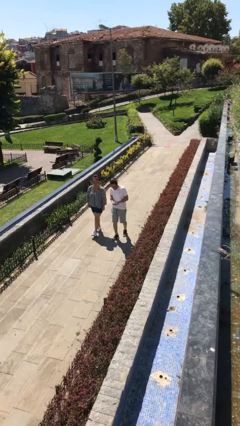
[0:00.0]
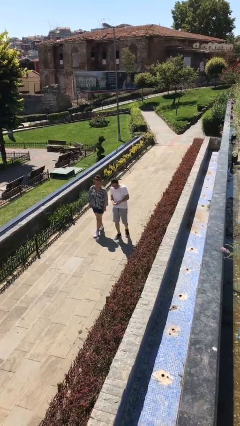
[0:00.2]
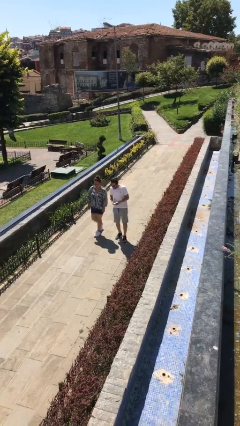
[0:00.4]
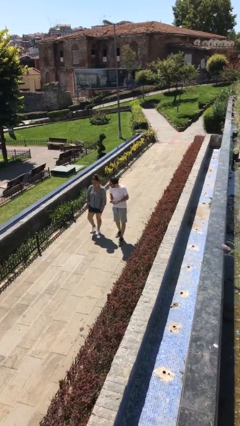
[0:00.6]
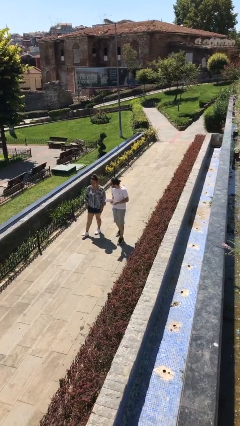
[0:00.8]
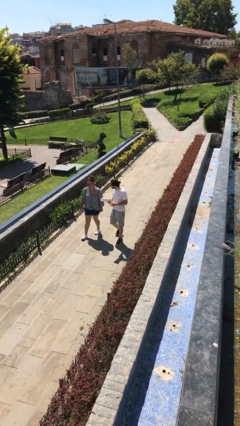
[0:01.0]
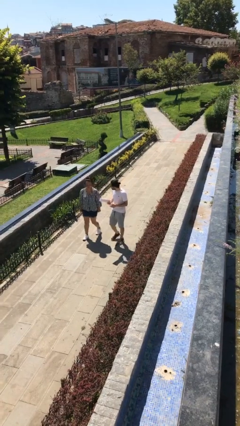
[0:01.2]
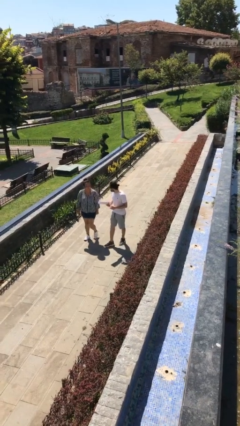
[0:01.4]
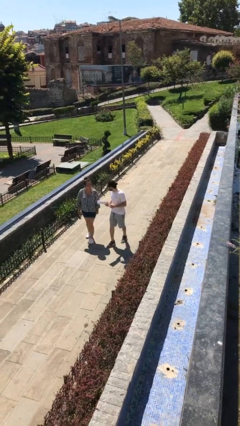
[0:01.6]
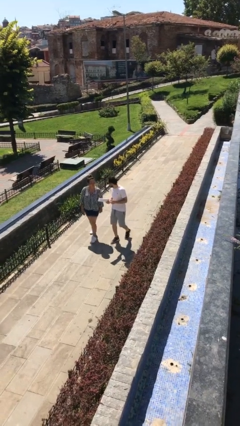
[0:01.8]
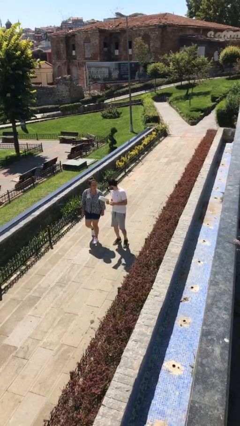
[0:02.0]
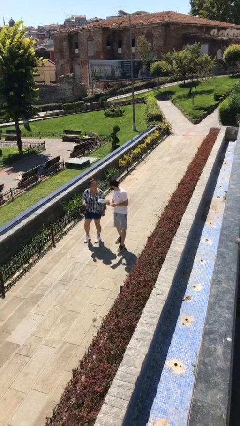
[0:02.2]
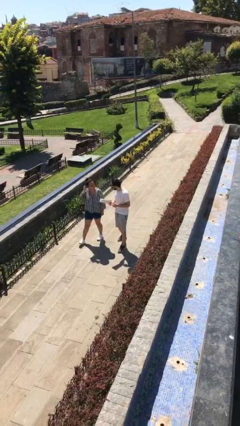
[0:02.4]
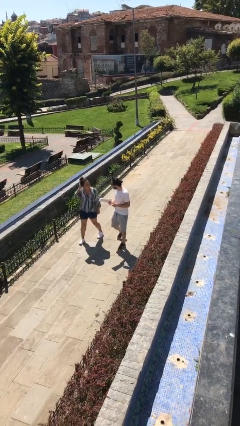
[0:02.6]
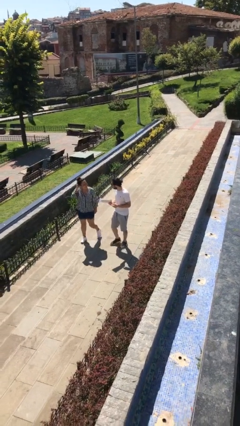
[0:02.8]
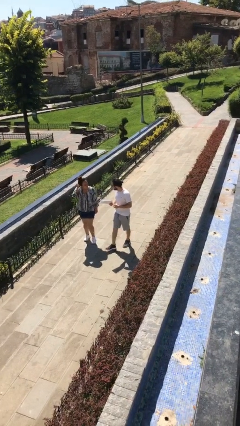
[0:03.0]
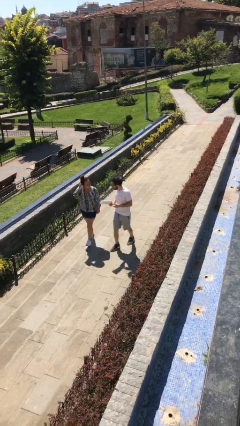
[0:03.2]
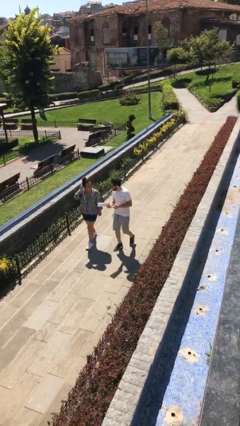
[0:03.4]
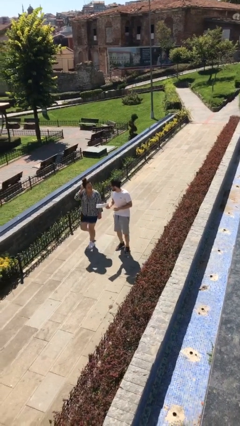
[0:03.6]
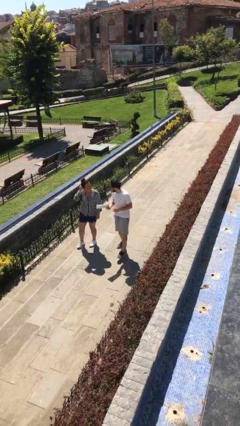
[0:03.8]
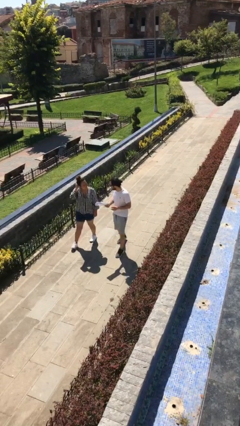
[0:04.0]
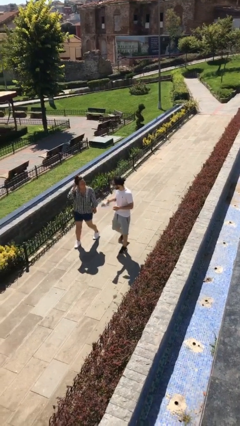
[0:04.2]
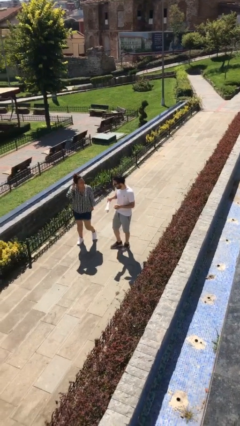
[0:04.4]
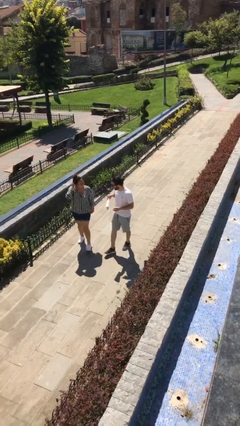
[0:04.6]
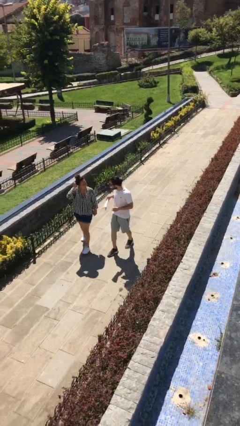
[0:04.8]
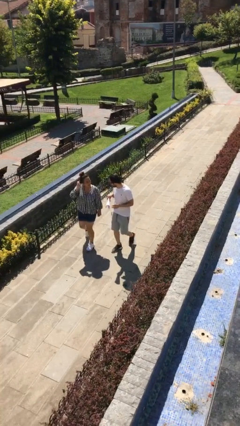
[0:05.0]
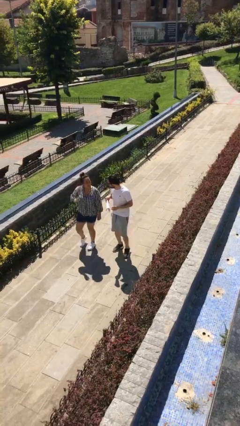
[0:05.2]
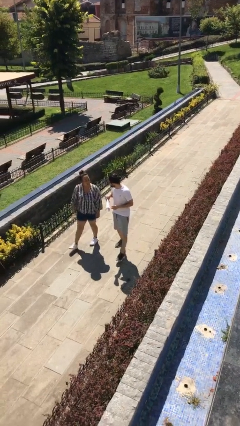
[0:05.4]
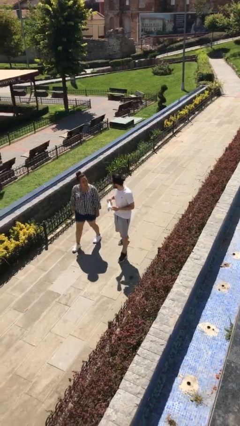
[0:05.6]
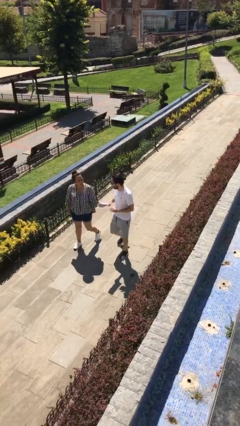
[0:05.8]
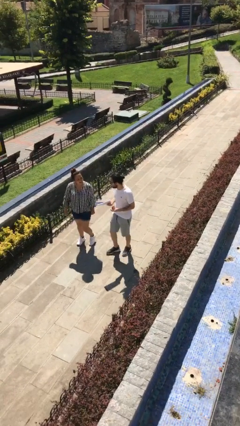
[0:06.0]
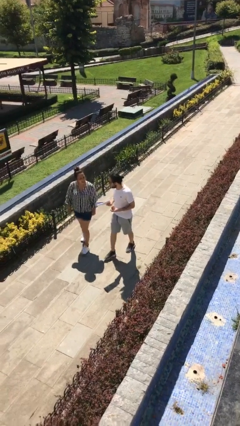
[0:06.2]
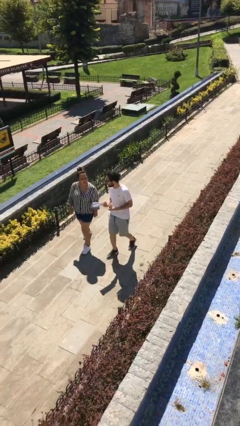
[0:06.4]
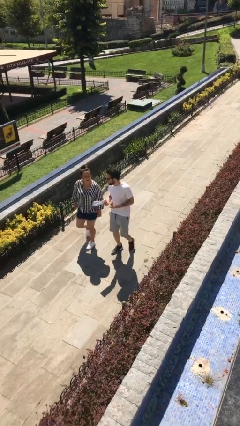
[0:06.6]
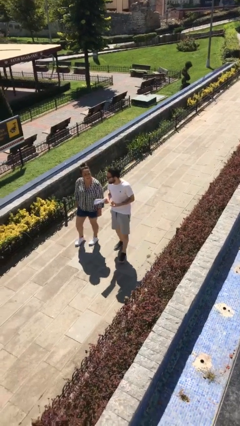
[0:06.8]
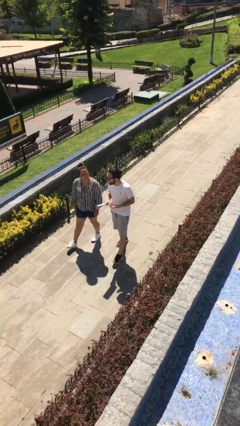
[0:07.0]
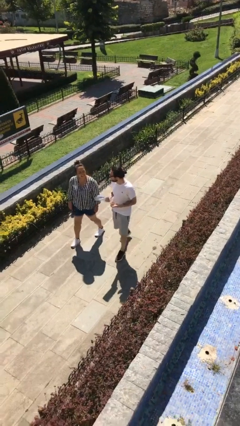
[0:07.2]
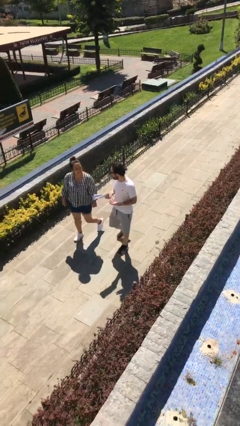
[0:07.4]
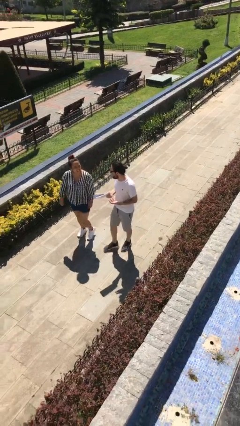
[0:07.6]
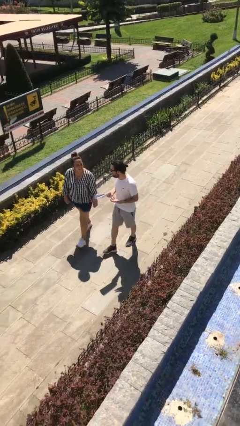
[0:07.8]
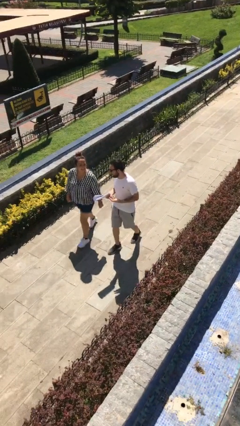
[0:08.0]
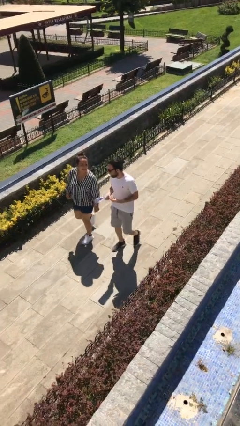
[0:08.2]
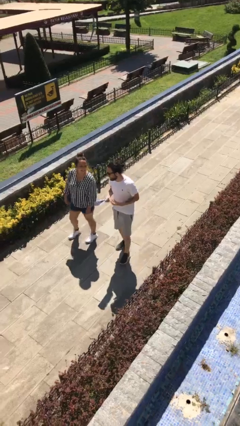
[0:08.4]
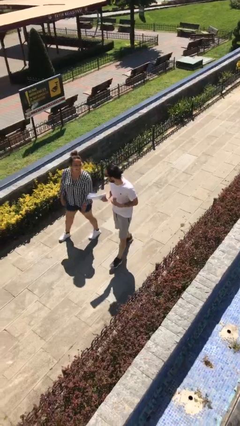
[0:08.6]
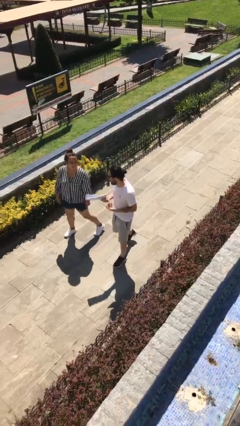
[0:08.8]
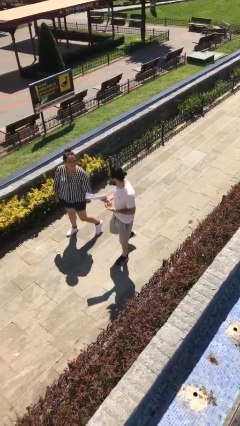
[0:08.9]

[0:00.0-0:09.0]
person talks to person

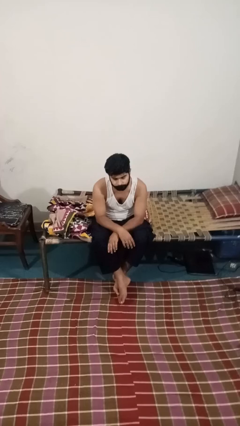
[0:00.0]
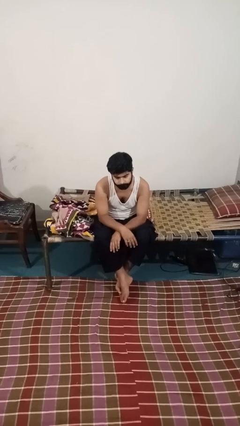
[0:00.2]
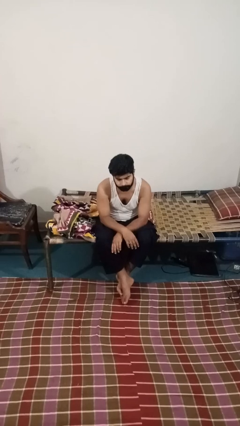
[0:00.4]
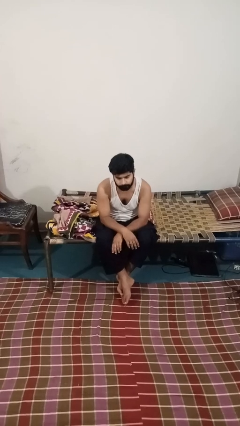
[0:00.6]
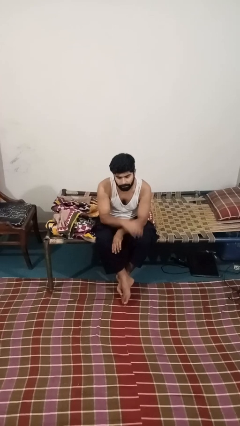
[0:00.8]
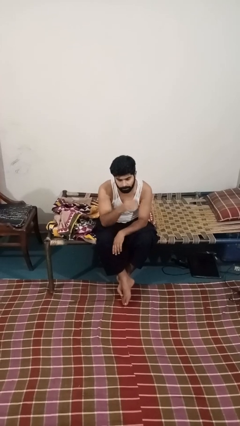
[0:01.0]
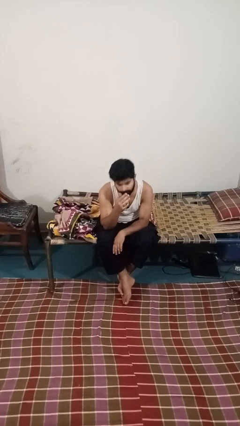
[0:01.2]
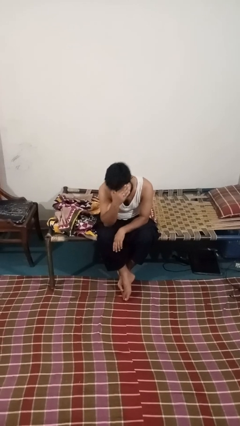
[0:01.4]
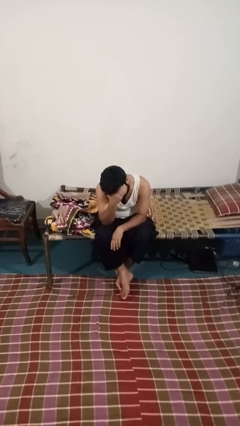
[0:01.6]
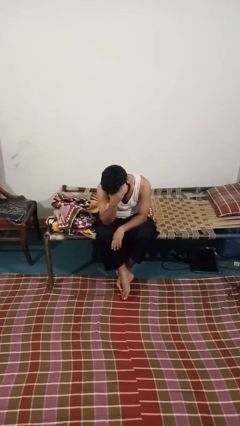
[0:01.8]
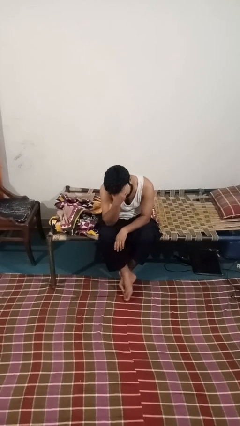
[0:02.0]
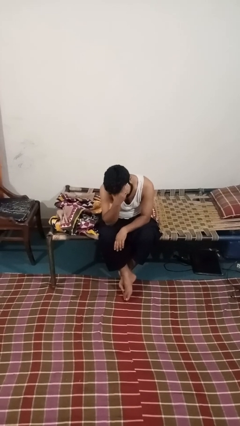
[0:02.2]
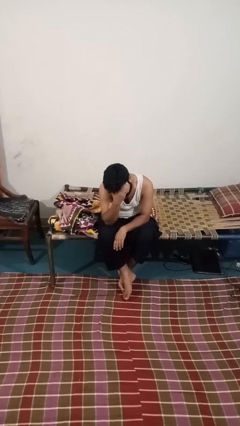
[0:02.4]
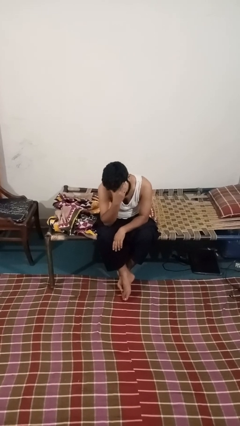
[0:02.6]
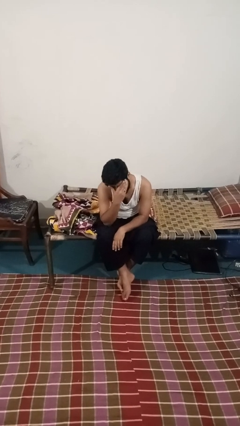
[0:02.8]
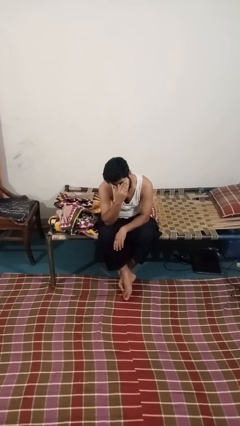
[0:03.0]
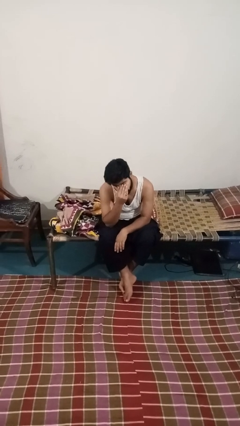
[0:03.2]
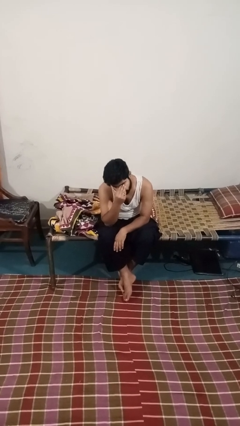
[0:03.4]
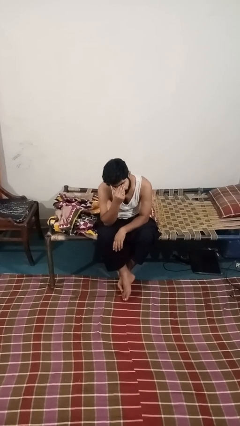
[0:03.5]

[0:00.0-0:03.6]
person covers face with hands

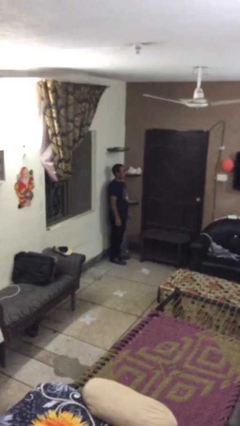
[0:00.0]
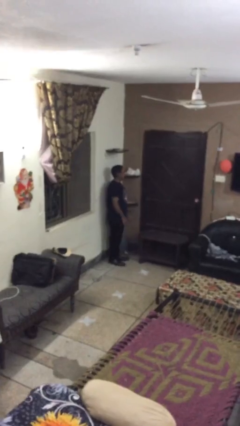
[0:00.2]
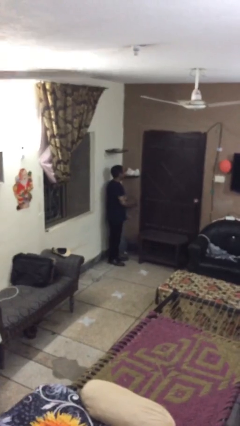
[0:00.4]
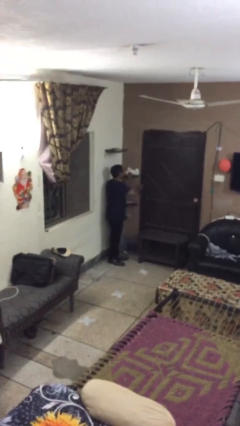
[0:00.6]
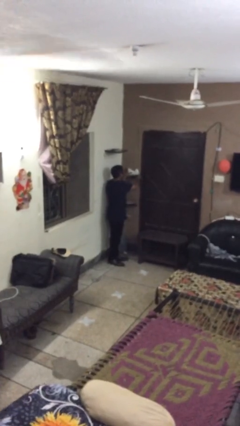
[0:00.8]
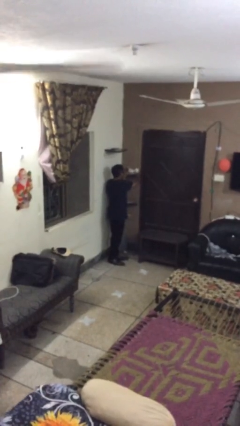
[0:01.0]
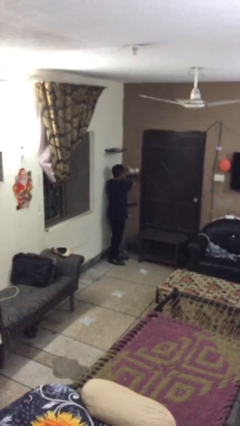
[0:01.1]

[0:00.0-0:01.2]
person picks up object from shelf

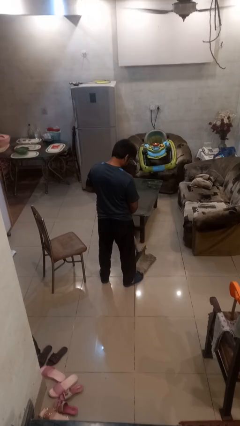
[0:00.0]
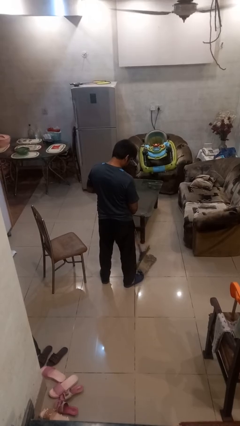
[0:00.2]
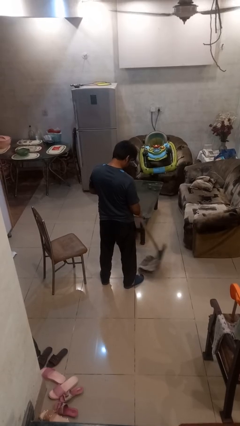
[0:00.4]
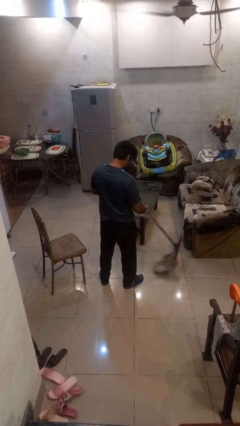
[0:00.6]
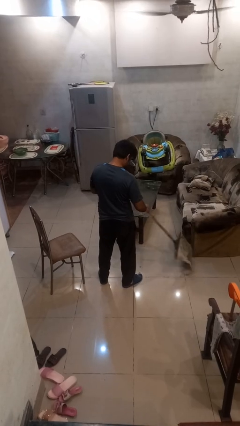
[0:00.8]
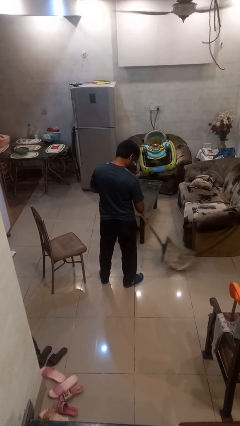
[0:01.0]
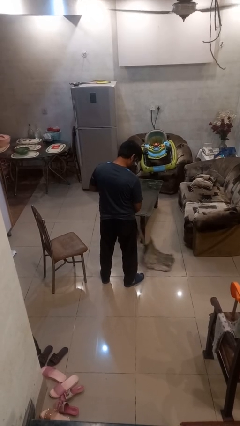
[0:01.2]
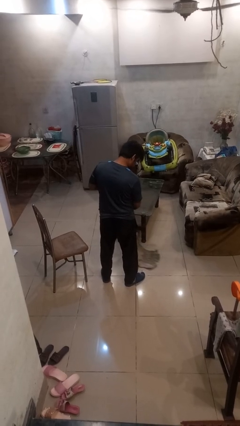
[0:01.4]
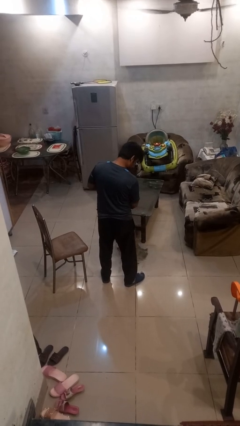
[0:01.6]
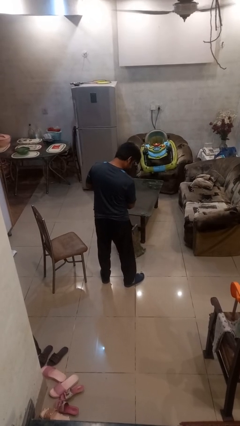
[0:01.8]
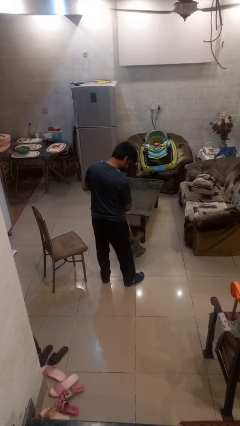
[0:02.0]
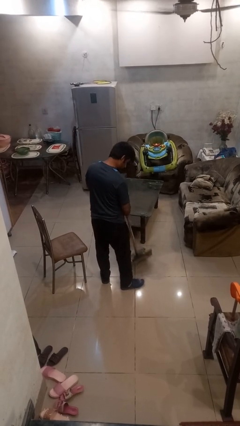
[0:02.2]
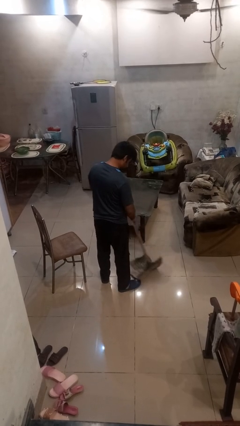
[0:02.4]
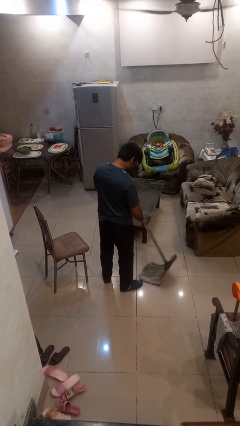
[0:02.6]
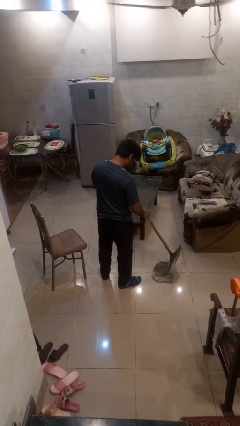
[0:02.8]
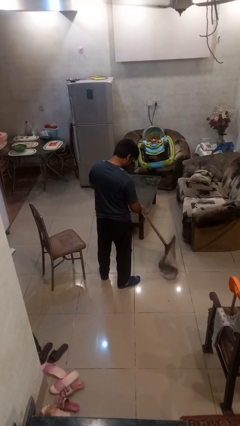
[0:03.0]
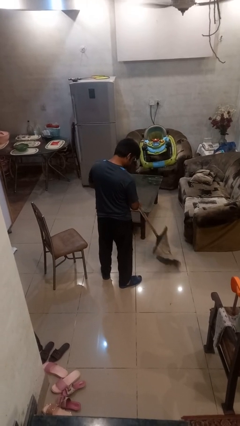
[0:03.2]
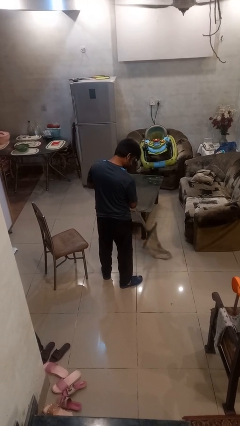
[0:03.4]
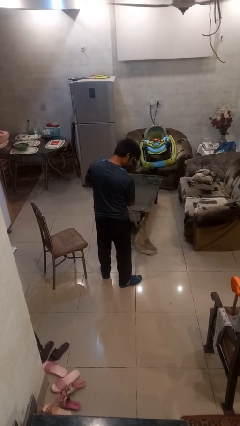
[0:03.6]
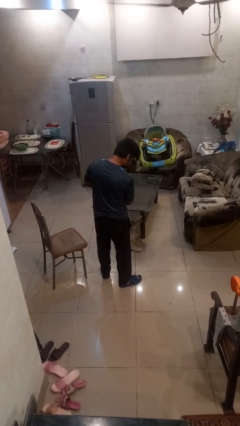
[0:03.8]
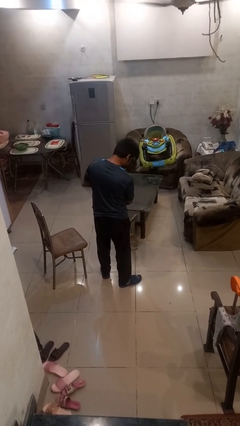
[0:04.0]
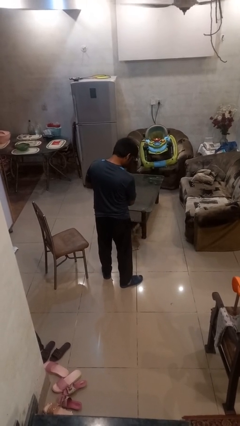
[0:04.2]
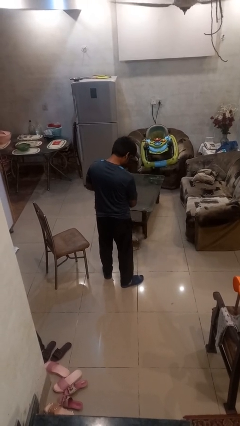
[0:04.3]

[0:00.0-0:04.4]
person mops
